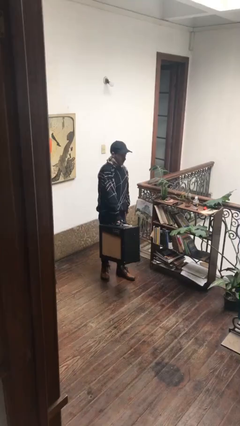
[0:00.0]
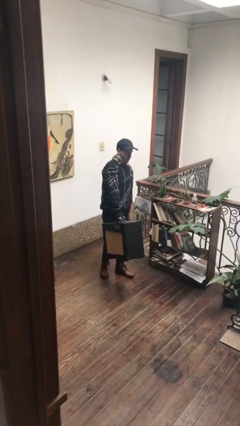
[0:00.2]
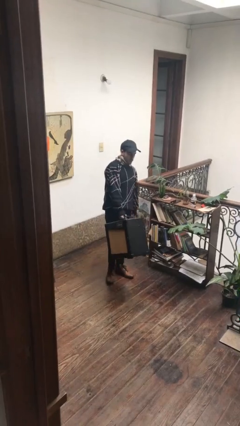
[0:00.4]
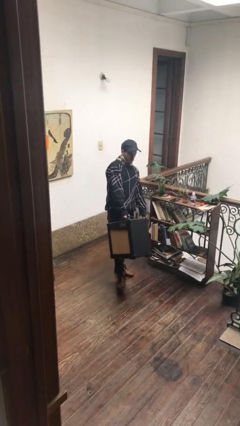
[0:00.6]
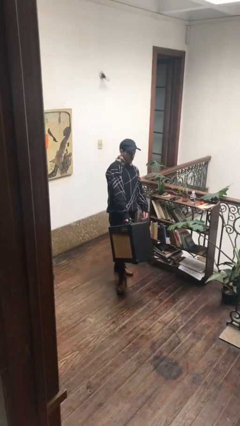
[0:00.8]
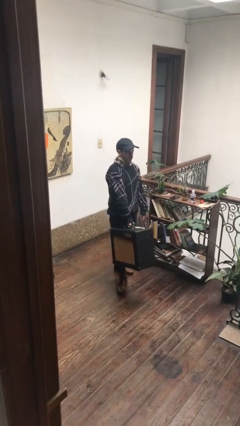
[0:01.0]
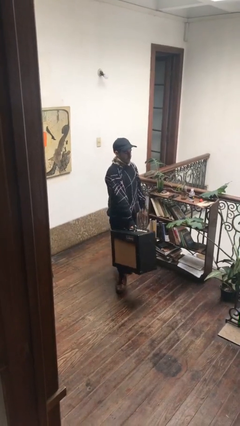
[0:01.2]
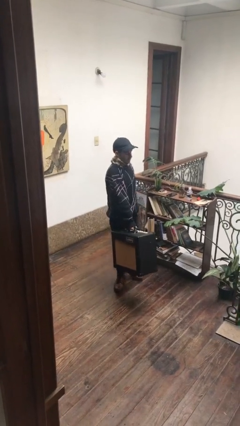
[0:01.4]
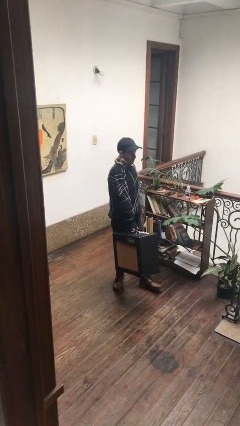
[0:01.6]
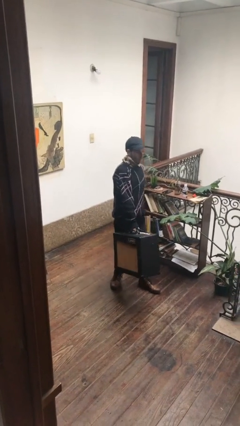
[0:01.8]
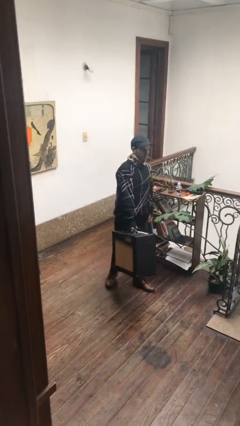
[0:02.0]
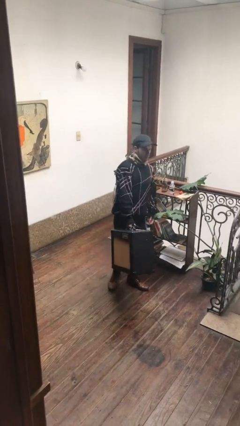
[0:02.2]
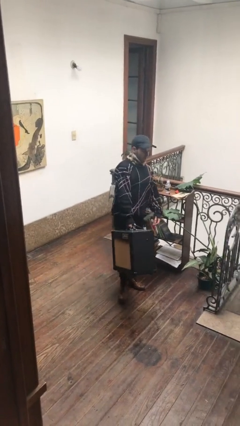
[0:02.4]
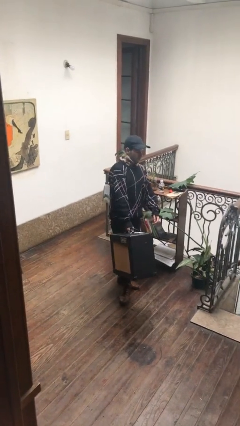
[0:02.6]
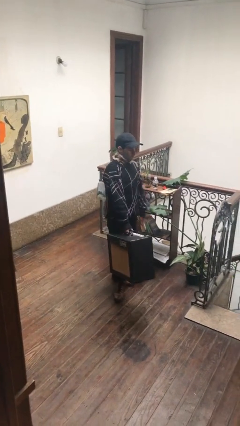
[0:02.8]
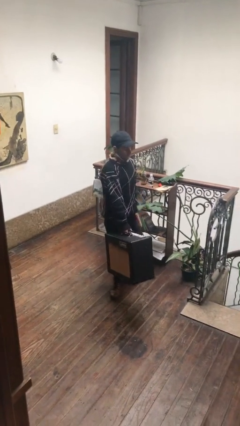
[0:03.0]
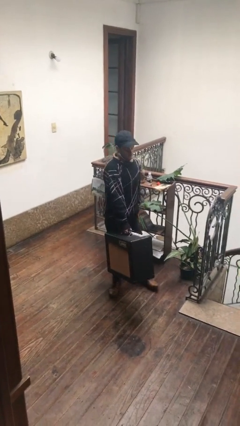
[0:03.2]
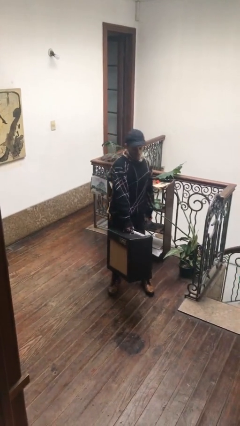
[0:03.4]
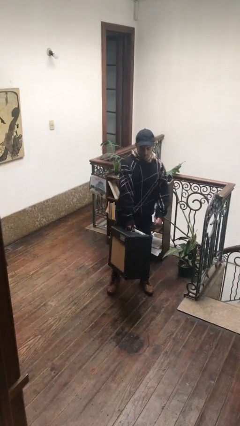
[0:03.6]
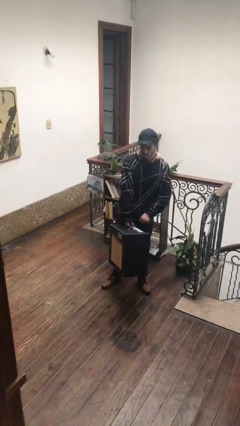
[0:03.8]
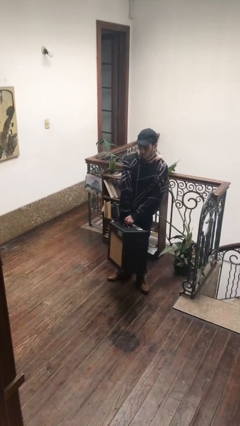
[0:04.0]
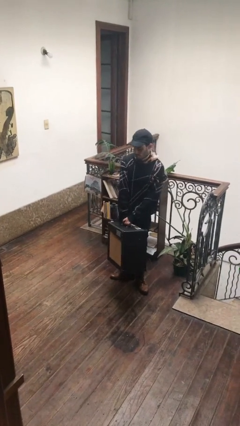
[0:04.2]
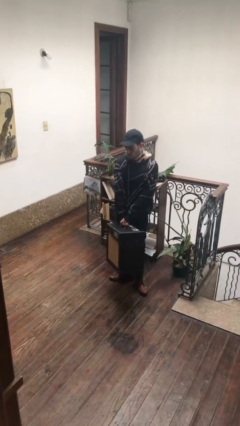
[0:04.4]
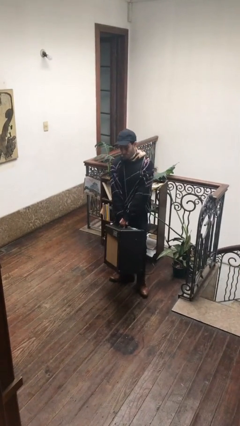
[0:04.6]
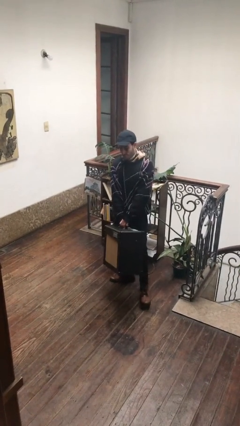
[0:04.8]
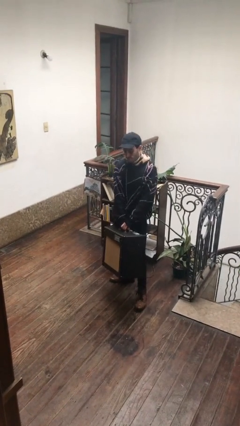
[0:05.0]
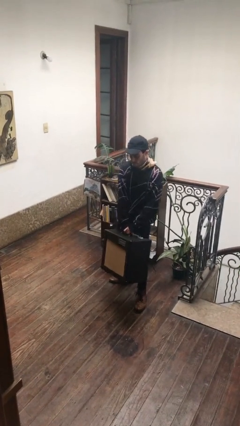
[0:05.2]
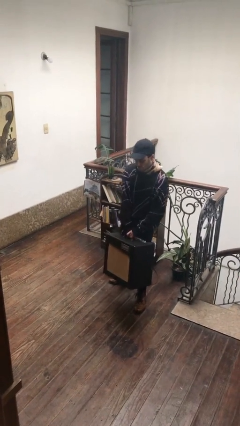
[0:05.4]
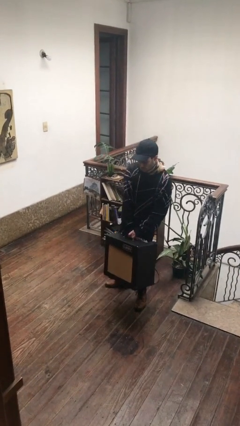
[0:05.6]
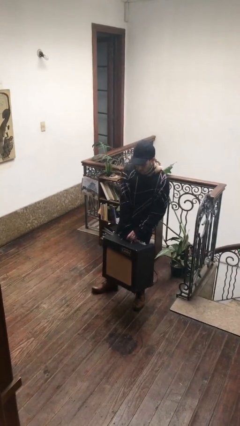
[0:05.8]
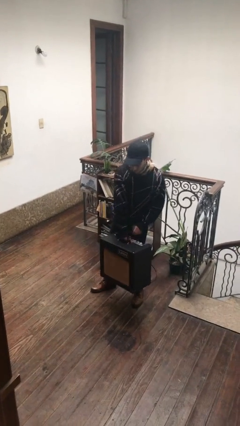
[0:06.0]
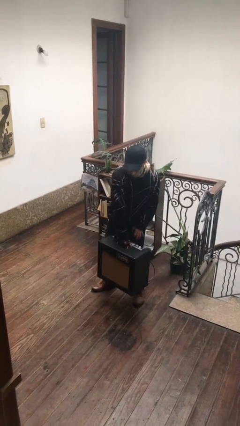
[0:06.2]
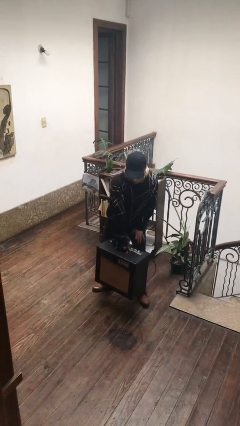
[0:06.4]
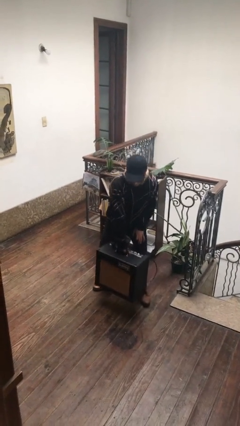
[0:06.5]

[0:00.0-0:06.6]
person carries heavy object

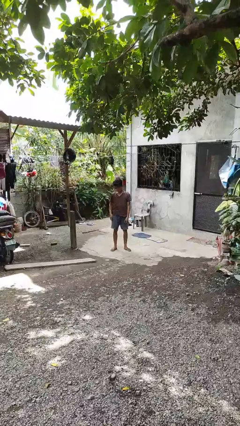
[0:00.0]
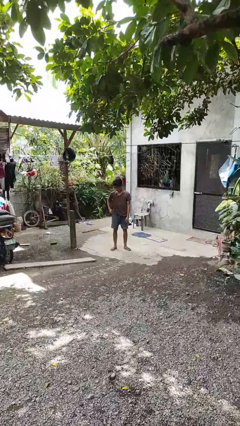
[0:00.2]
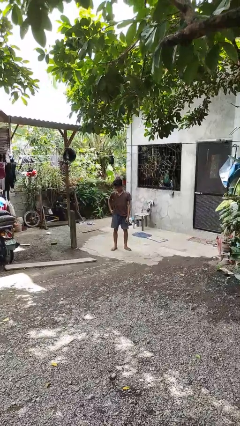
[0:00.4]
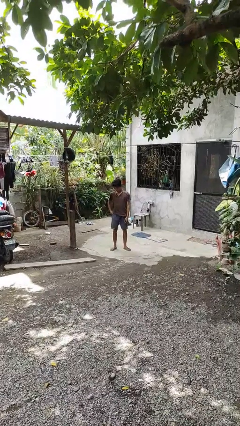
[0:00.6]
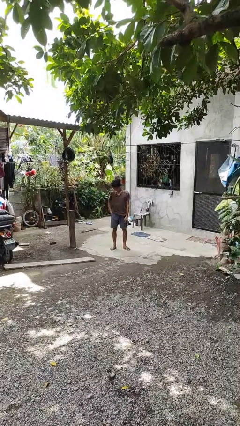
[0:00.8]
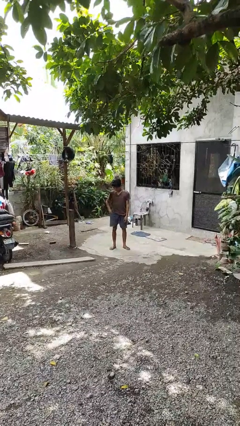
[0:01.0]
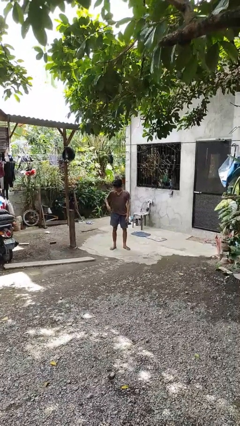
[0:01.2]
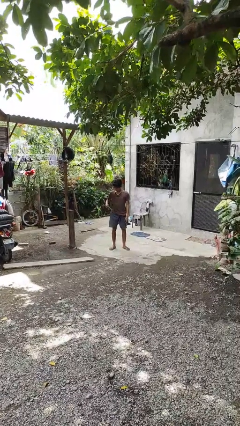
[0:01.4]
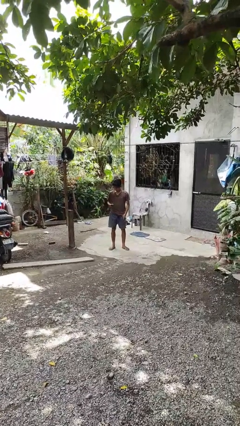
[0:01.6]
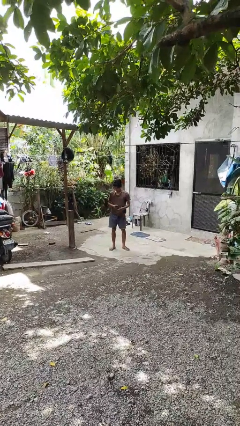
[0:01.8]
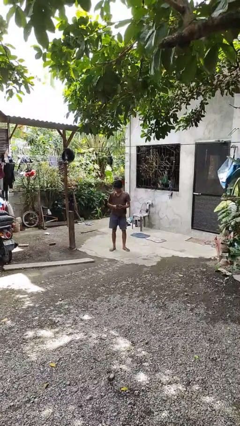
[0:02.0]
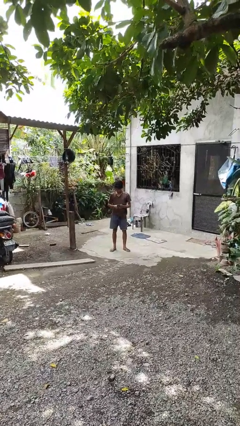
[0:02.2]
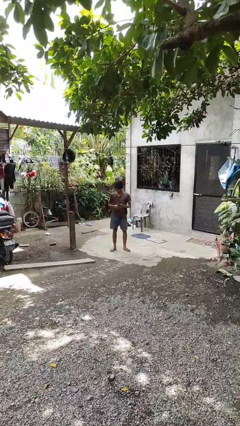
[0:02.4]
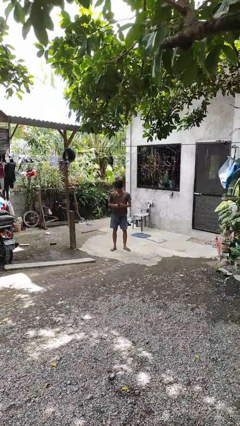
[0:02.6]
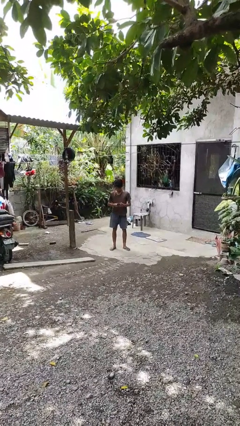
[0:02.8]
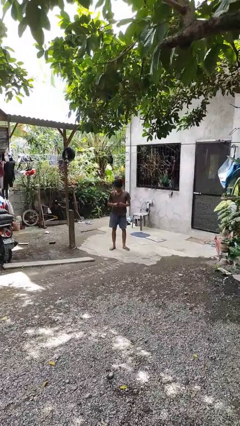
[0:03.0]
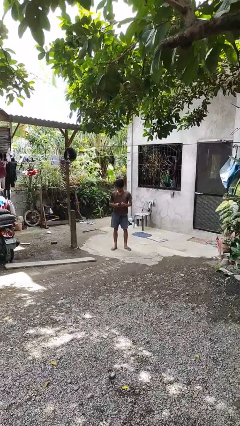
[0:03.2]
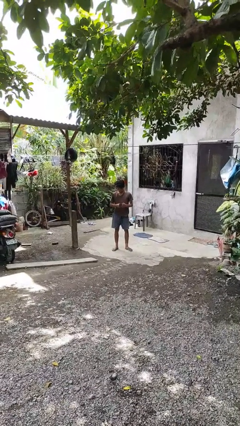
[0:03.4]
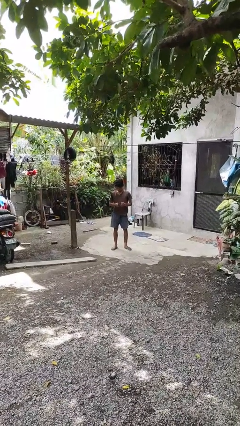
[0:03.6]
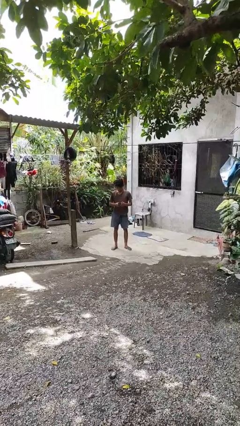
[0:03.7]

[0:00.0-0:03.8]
person takes phone from pocket

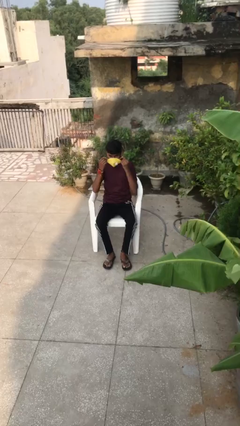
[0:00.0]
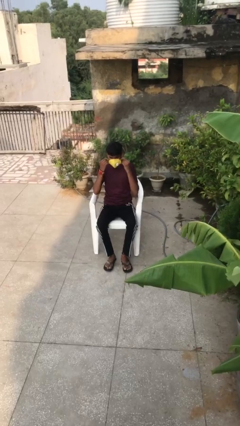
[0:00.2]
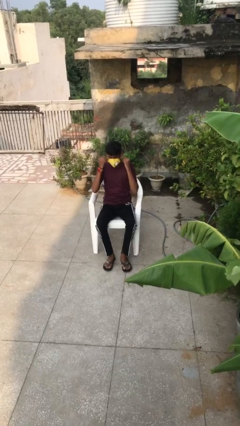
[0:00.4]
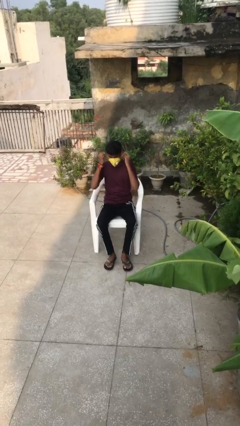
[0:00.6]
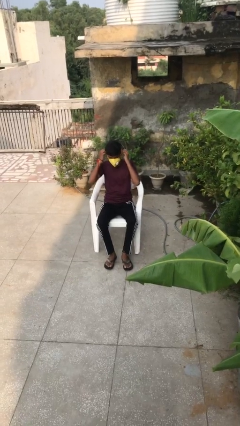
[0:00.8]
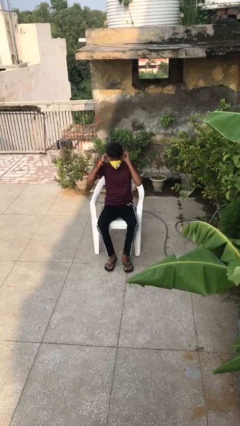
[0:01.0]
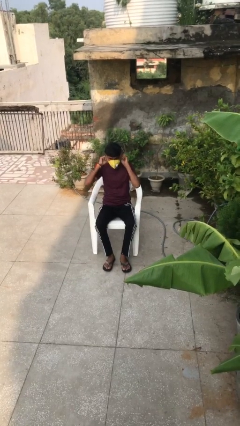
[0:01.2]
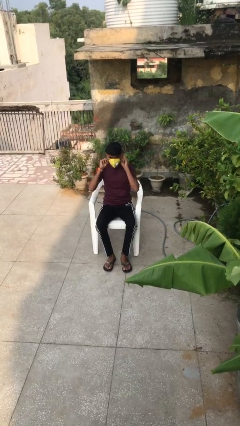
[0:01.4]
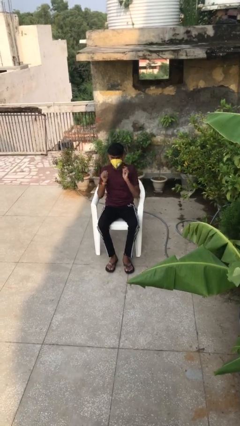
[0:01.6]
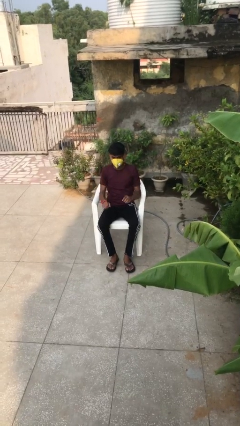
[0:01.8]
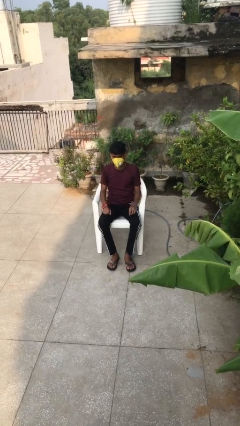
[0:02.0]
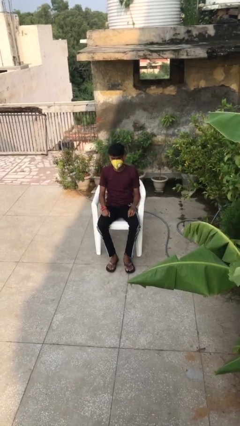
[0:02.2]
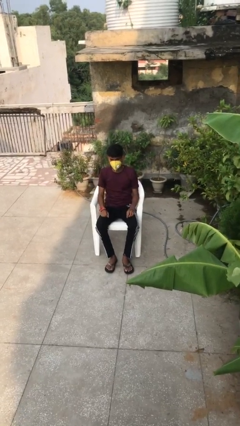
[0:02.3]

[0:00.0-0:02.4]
person puts on facemask

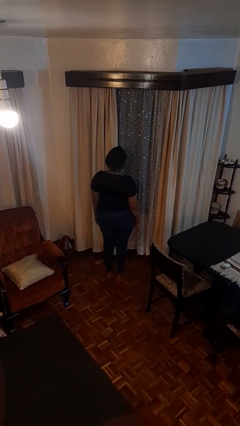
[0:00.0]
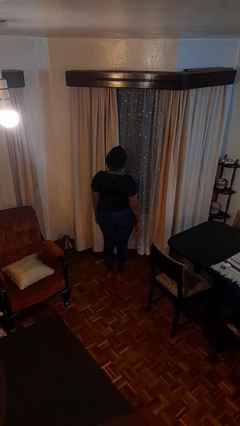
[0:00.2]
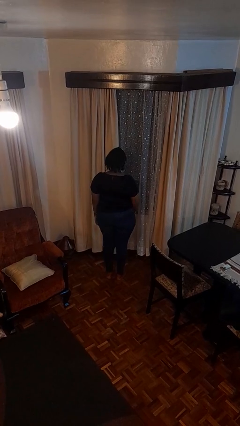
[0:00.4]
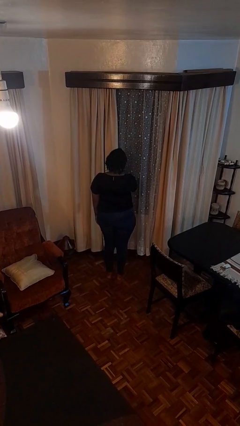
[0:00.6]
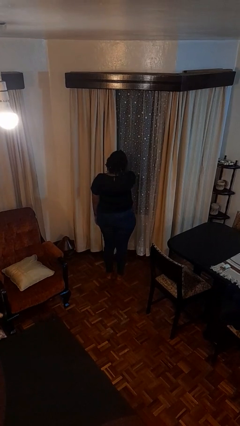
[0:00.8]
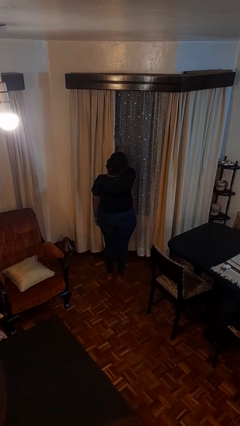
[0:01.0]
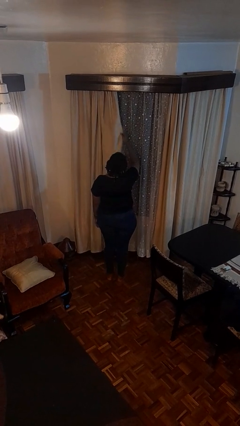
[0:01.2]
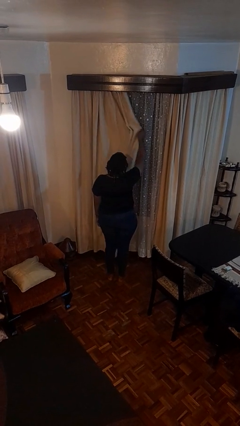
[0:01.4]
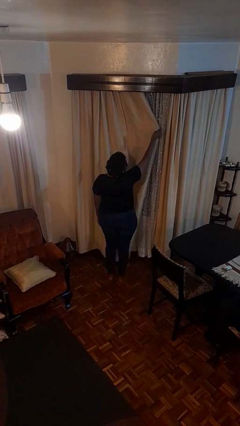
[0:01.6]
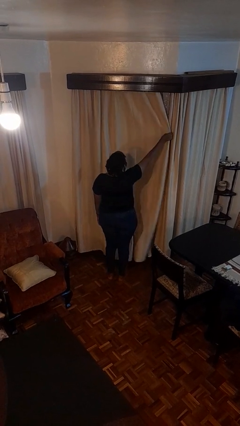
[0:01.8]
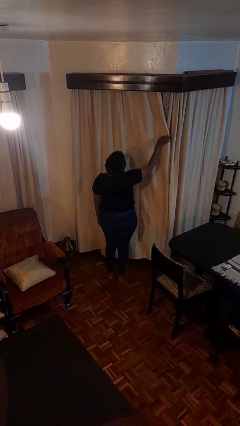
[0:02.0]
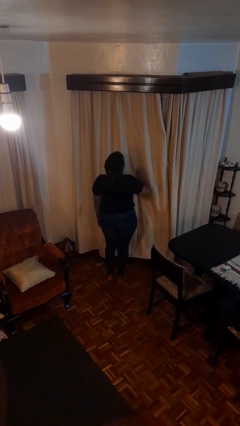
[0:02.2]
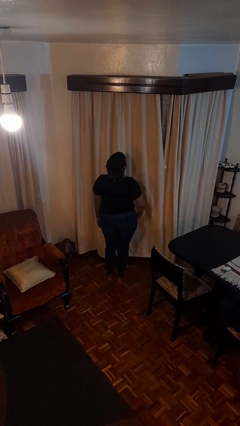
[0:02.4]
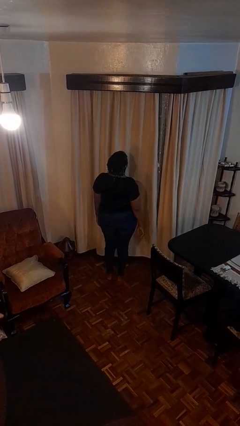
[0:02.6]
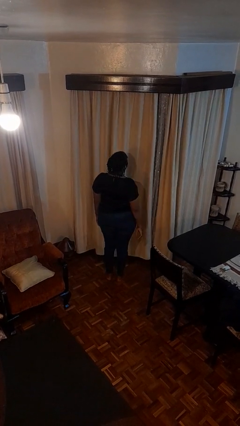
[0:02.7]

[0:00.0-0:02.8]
person closes curtains

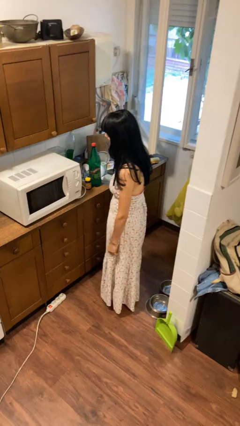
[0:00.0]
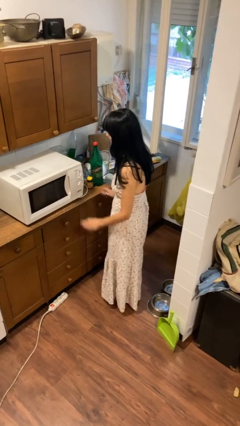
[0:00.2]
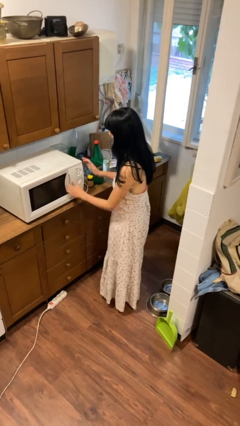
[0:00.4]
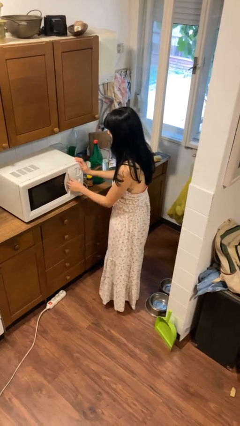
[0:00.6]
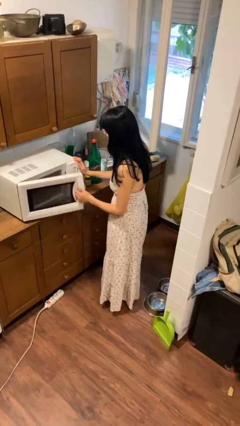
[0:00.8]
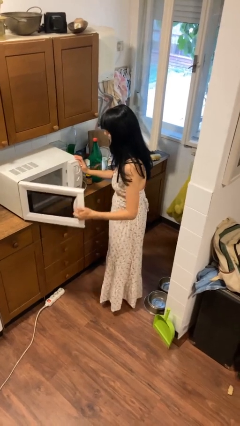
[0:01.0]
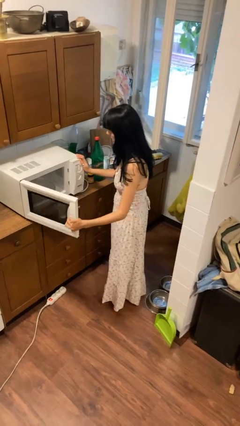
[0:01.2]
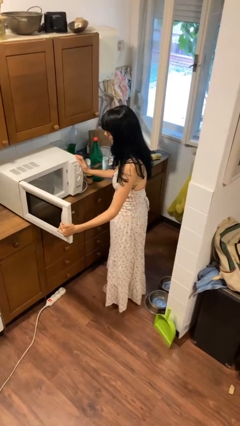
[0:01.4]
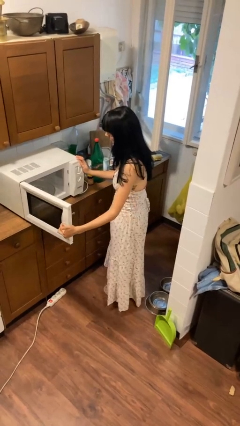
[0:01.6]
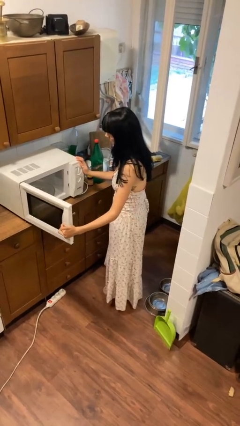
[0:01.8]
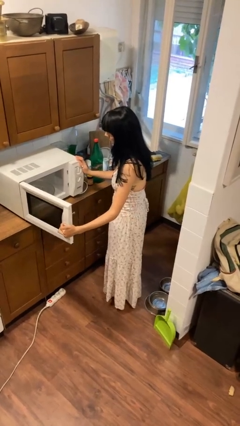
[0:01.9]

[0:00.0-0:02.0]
person opens microwave
